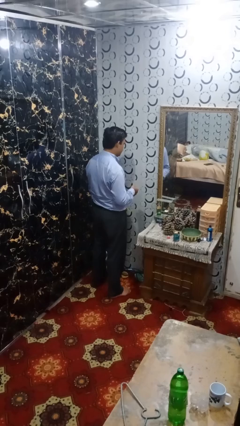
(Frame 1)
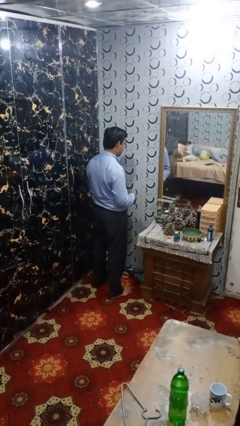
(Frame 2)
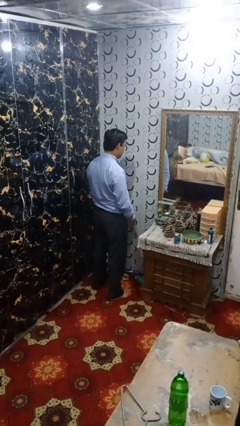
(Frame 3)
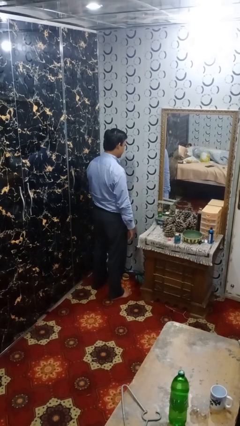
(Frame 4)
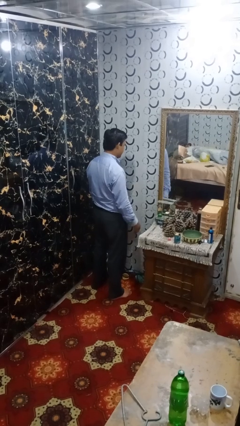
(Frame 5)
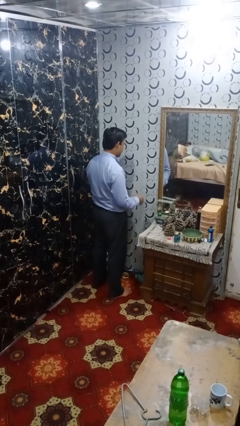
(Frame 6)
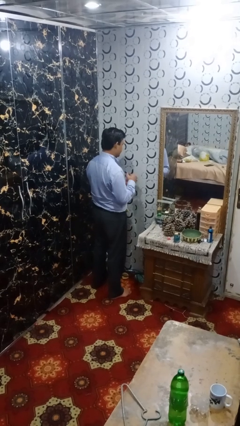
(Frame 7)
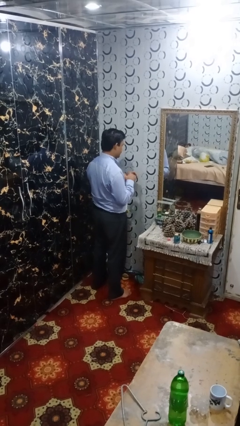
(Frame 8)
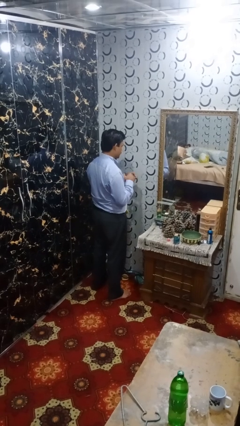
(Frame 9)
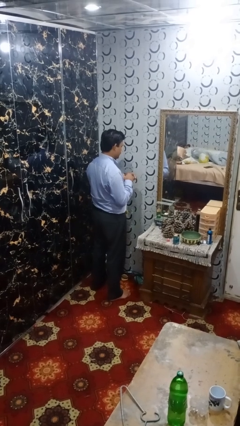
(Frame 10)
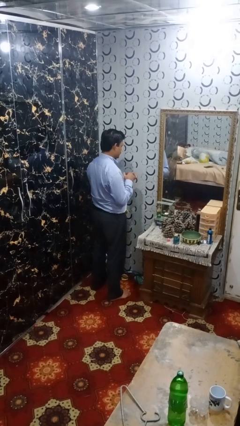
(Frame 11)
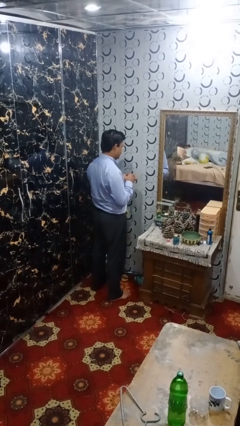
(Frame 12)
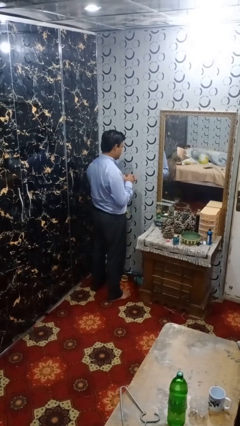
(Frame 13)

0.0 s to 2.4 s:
person puts on ring

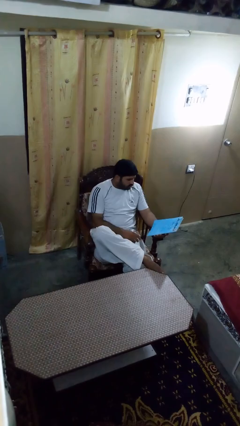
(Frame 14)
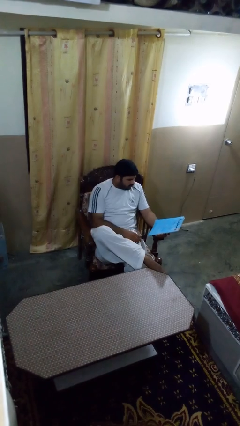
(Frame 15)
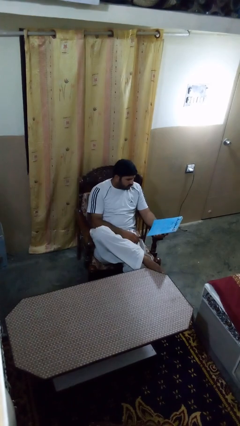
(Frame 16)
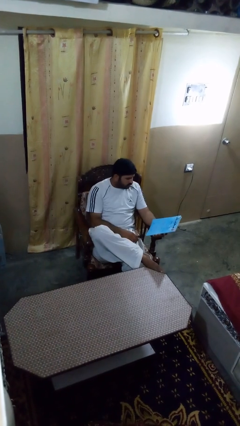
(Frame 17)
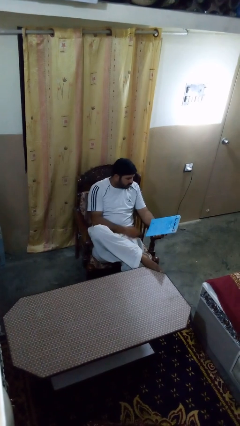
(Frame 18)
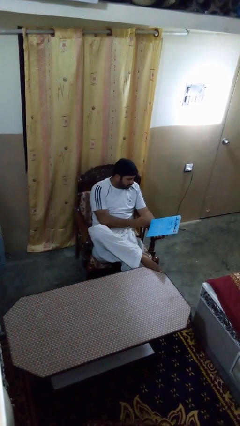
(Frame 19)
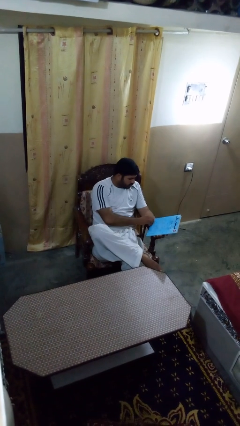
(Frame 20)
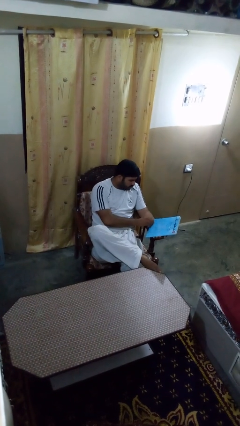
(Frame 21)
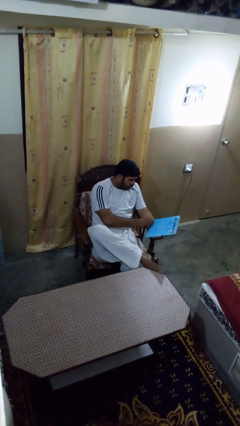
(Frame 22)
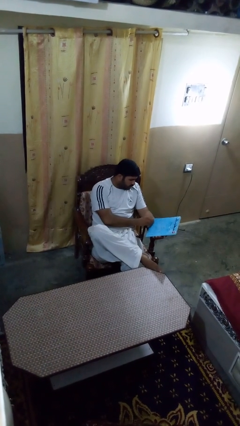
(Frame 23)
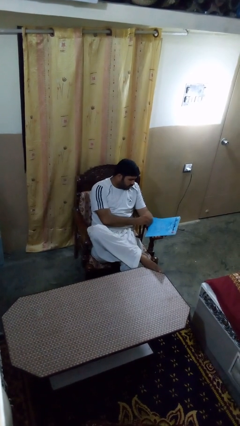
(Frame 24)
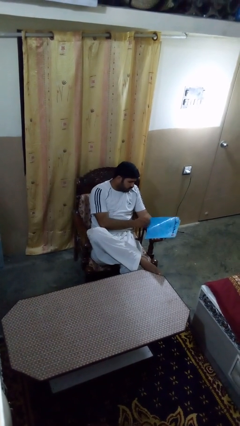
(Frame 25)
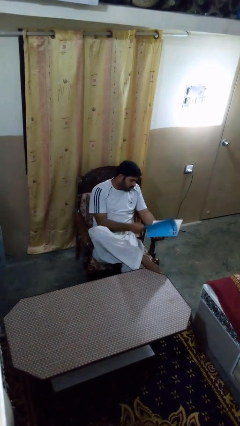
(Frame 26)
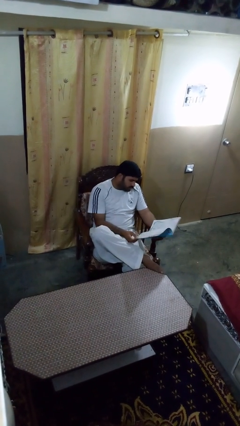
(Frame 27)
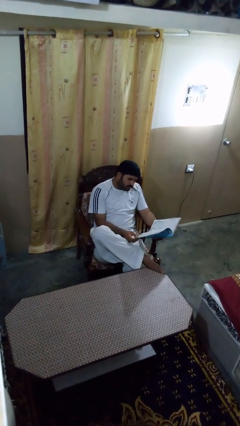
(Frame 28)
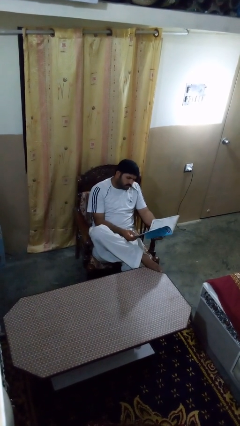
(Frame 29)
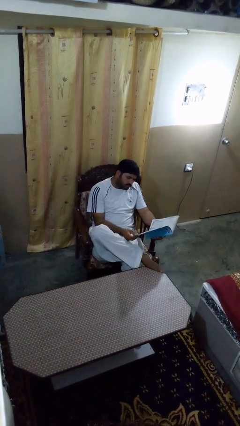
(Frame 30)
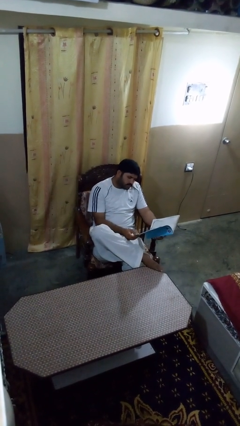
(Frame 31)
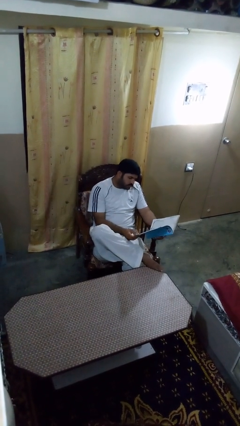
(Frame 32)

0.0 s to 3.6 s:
person reads magazine

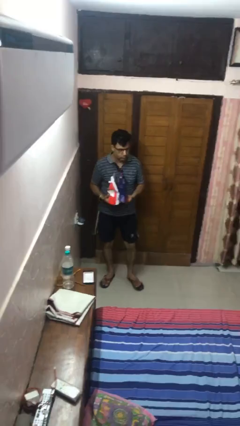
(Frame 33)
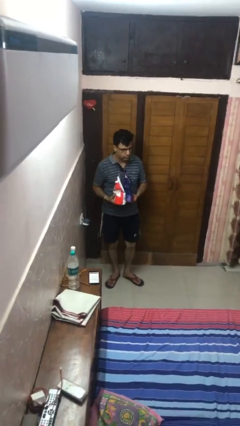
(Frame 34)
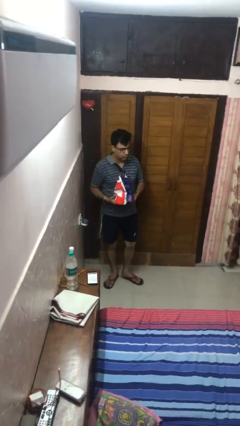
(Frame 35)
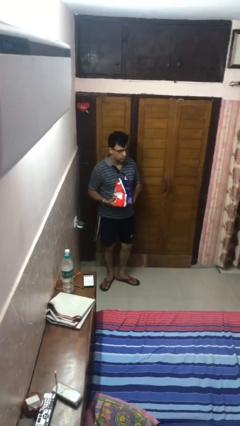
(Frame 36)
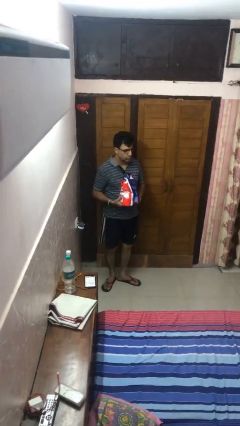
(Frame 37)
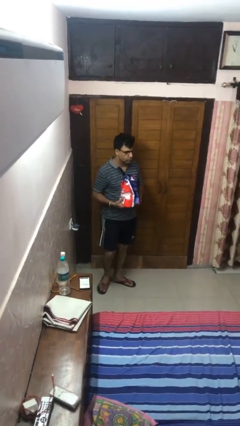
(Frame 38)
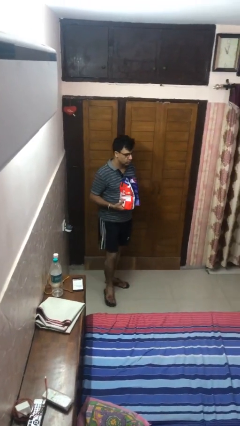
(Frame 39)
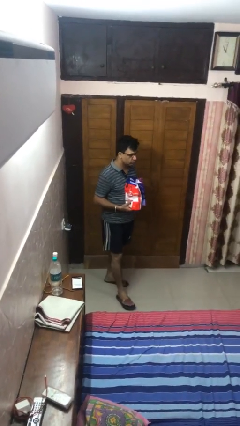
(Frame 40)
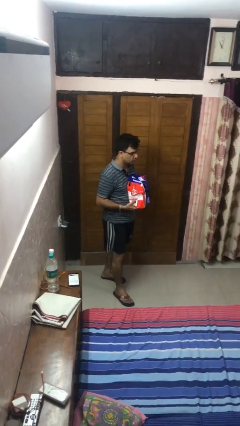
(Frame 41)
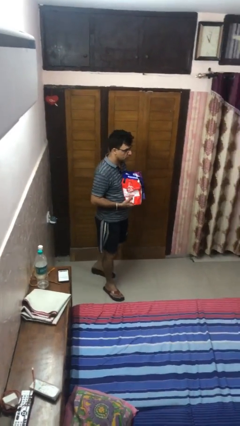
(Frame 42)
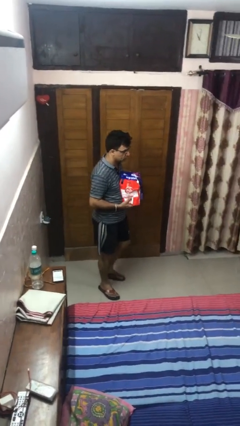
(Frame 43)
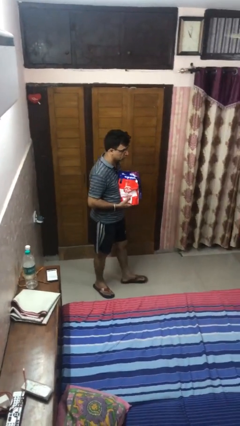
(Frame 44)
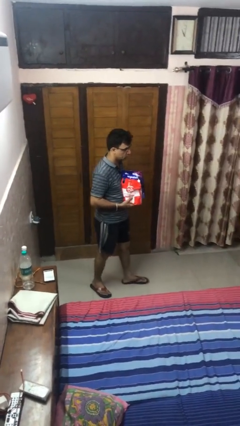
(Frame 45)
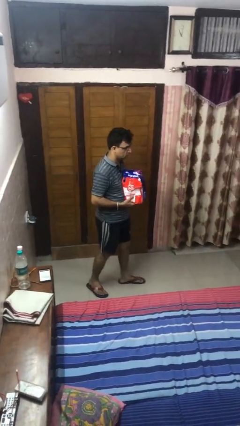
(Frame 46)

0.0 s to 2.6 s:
person carries groceries

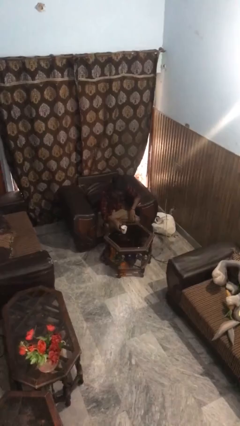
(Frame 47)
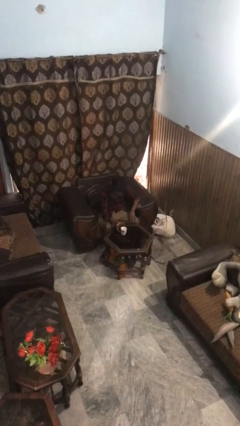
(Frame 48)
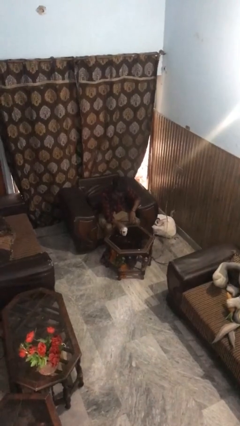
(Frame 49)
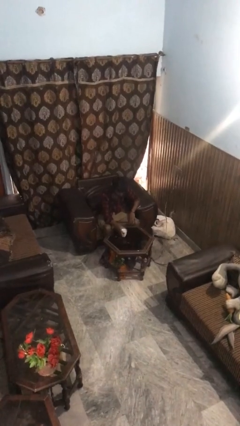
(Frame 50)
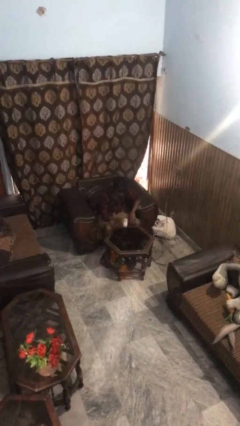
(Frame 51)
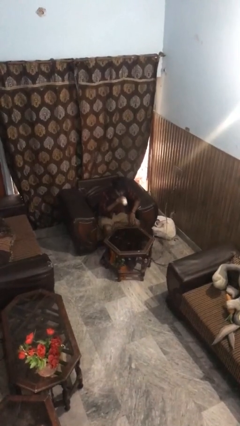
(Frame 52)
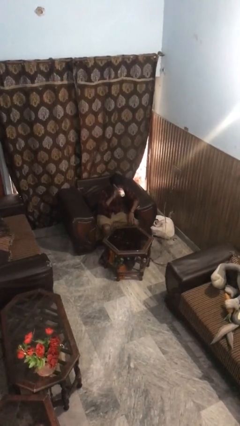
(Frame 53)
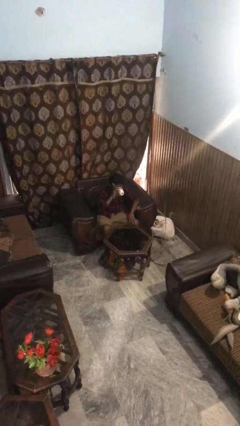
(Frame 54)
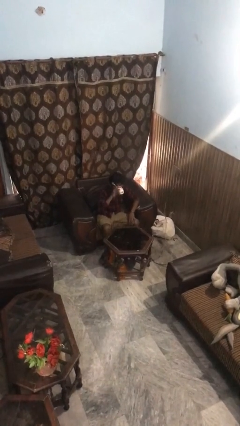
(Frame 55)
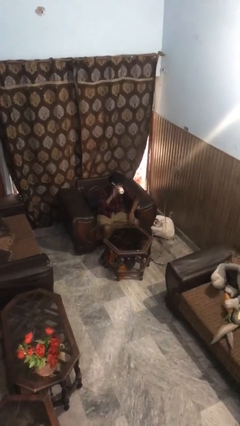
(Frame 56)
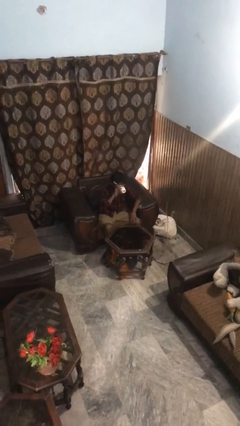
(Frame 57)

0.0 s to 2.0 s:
person drinks from mug

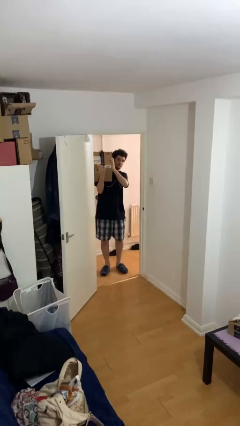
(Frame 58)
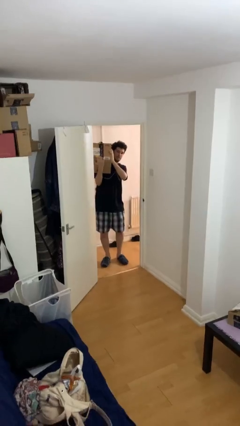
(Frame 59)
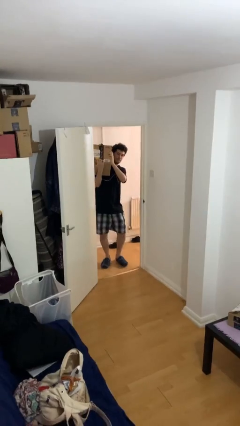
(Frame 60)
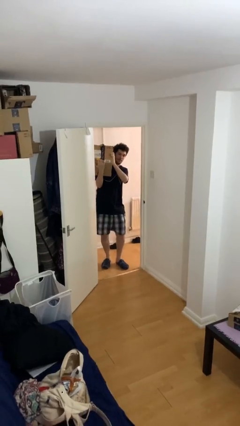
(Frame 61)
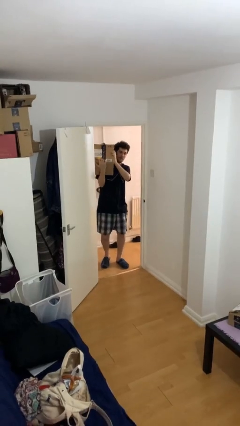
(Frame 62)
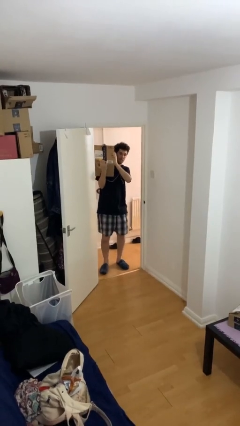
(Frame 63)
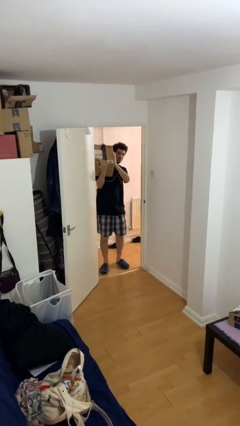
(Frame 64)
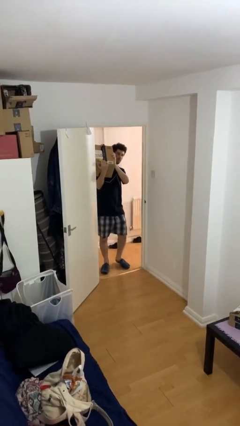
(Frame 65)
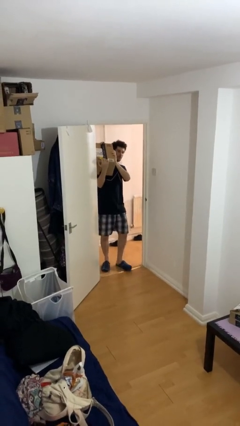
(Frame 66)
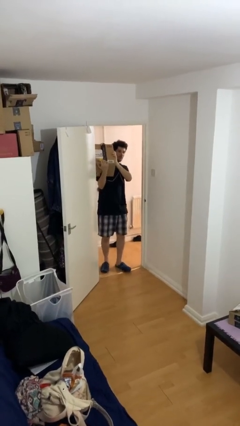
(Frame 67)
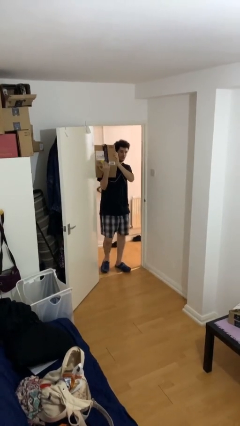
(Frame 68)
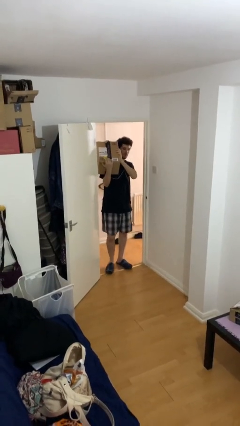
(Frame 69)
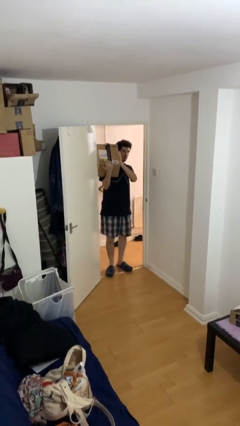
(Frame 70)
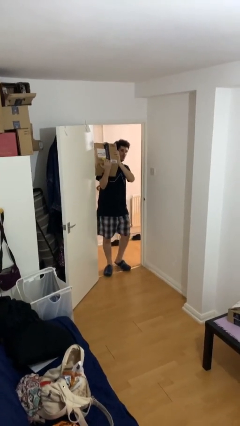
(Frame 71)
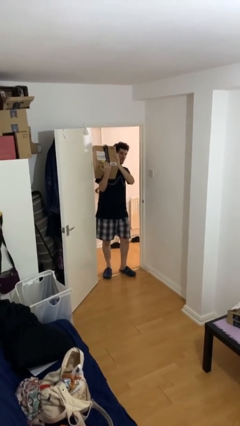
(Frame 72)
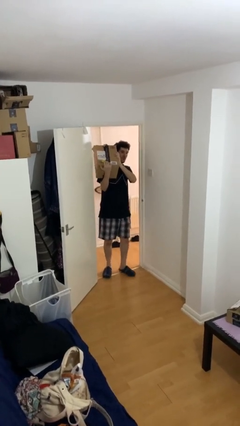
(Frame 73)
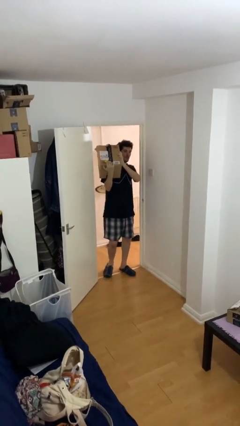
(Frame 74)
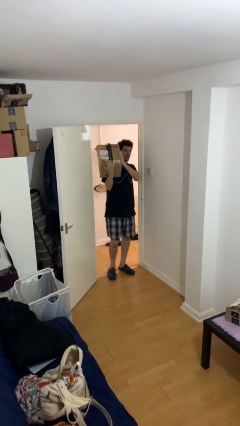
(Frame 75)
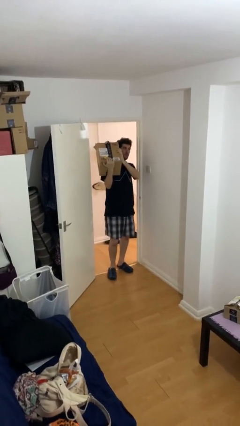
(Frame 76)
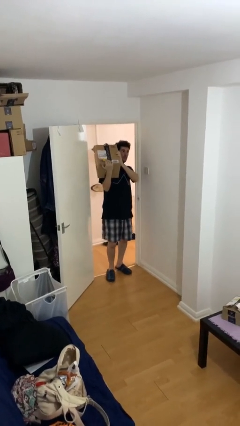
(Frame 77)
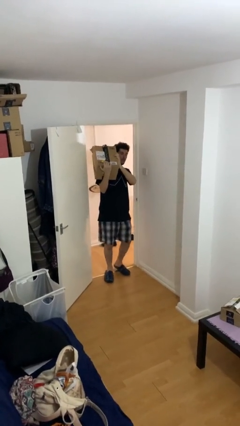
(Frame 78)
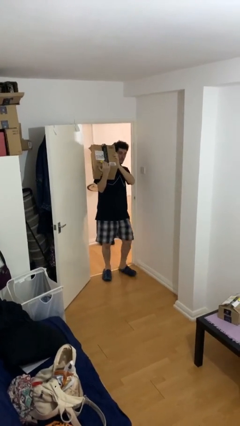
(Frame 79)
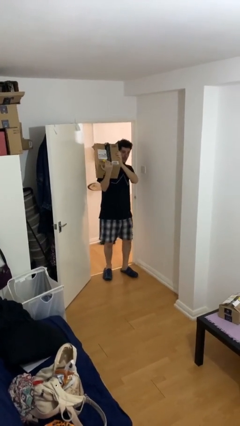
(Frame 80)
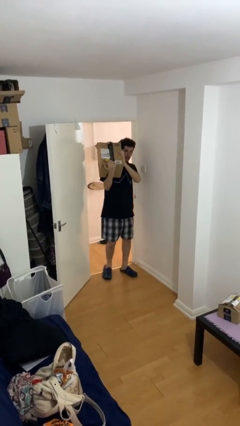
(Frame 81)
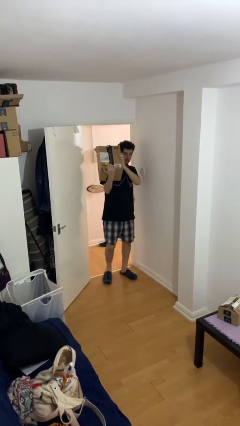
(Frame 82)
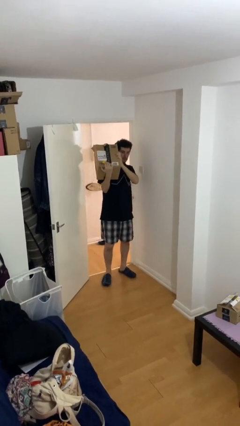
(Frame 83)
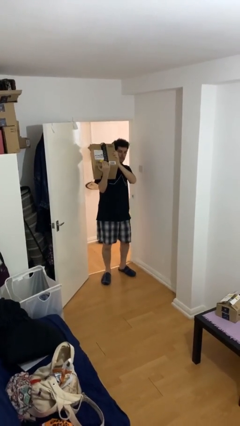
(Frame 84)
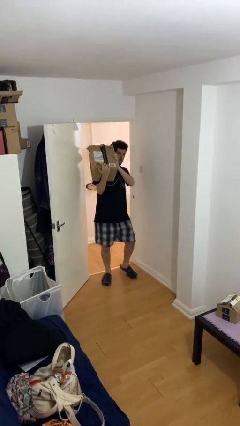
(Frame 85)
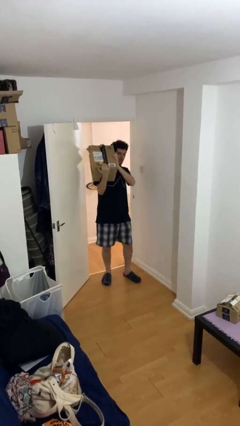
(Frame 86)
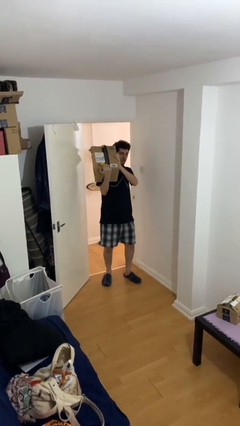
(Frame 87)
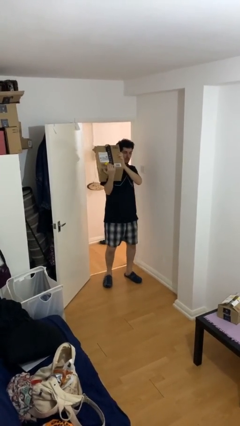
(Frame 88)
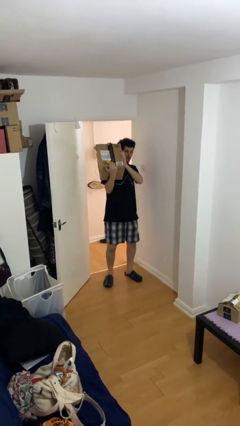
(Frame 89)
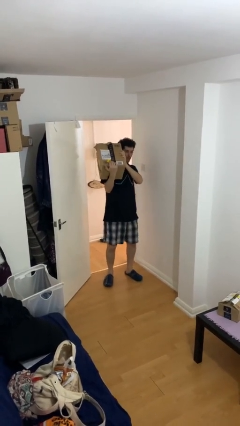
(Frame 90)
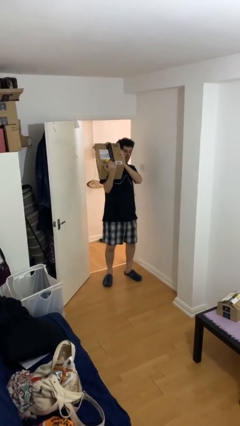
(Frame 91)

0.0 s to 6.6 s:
person carries heavy object

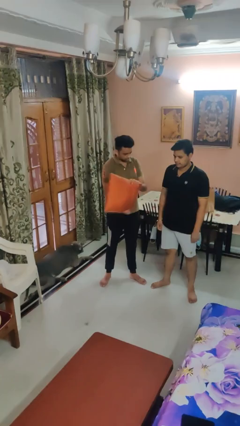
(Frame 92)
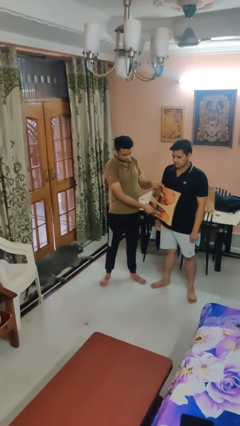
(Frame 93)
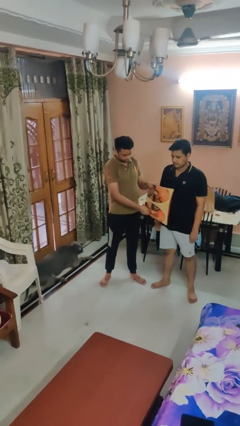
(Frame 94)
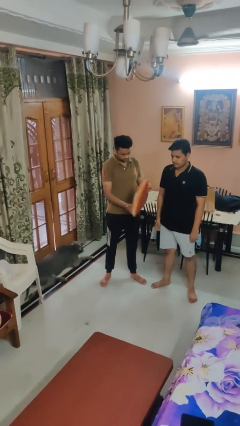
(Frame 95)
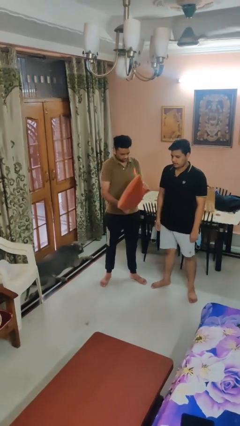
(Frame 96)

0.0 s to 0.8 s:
person hits person with pillow
